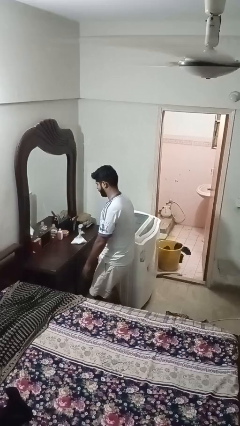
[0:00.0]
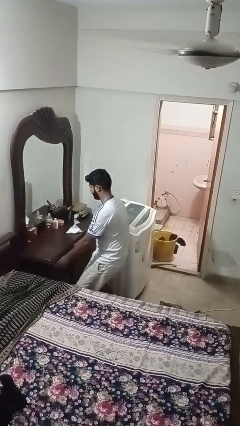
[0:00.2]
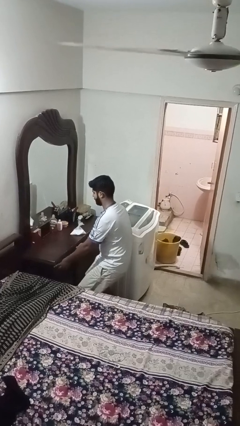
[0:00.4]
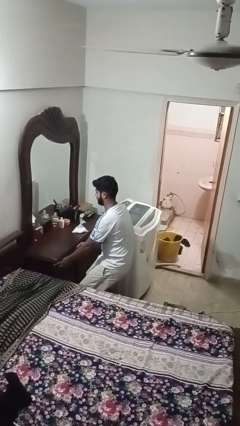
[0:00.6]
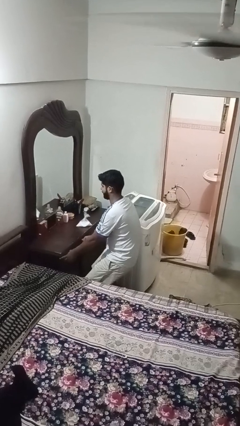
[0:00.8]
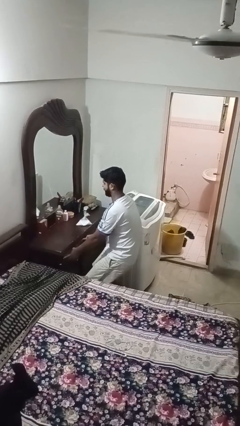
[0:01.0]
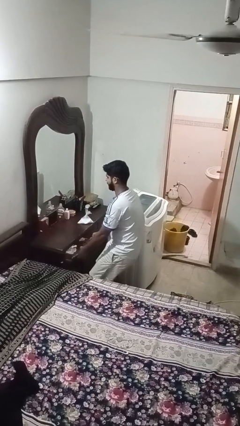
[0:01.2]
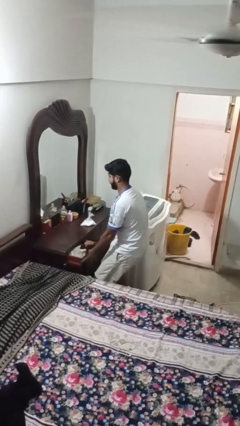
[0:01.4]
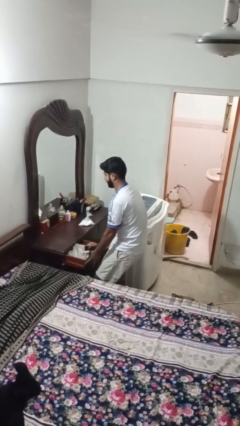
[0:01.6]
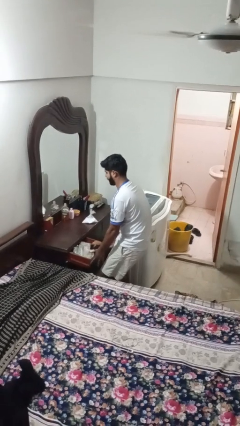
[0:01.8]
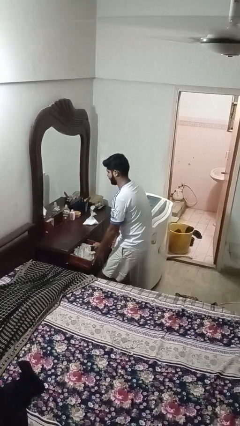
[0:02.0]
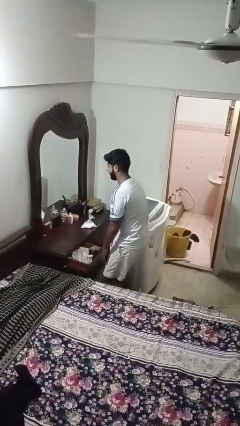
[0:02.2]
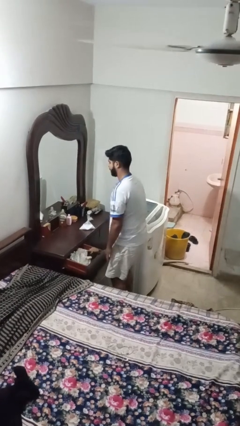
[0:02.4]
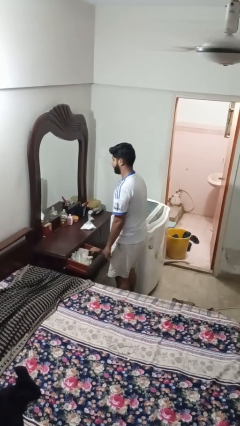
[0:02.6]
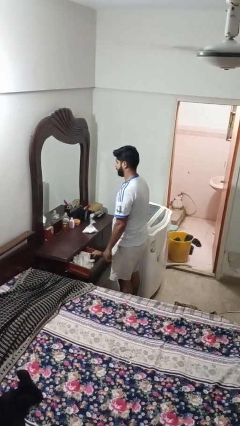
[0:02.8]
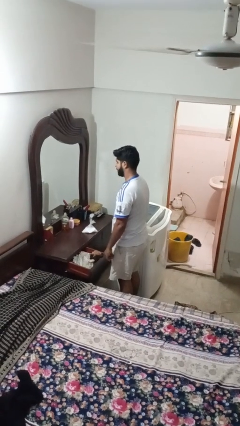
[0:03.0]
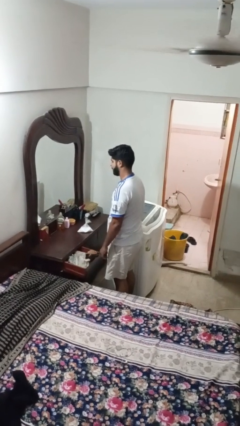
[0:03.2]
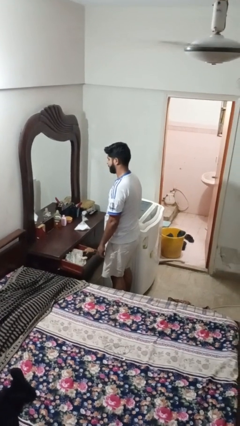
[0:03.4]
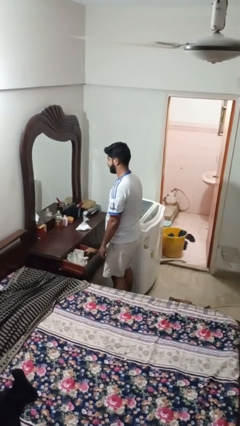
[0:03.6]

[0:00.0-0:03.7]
person opens dresser drawer

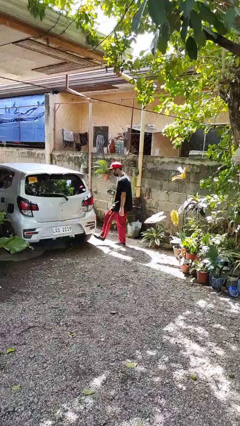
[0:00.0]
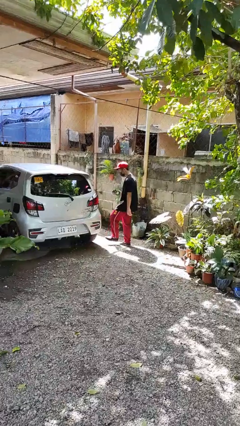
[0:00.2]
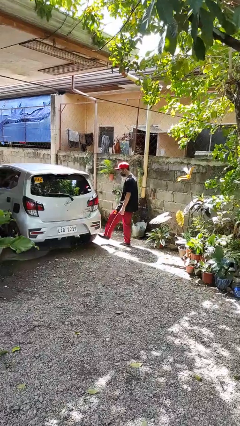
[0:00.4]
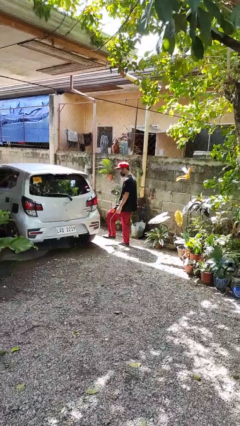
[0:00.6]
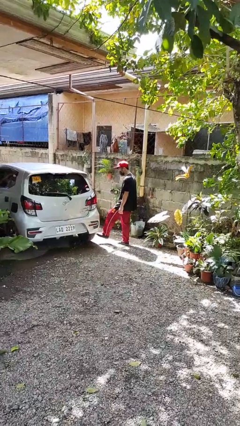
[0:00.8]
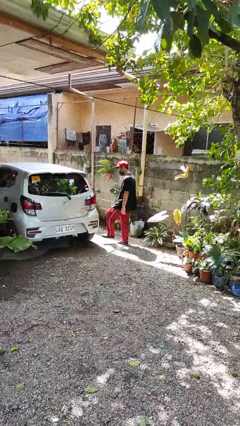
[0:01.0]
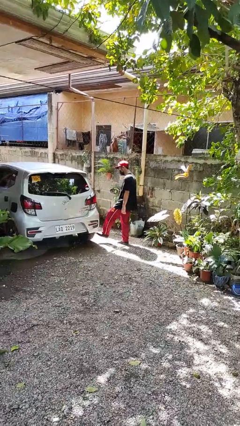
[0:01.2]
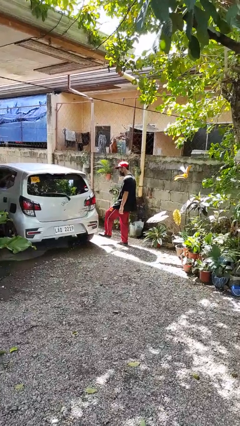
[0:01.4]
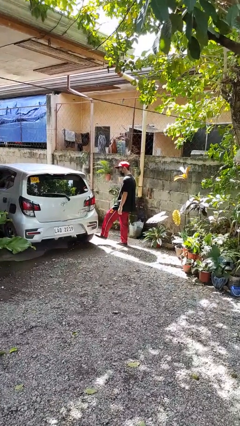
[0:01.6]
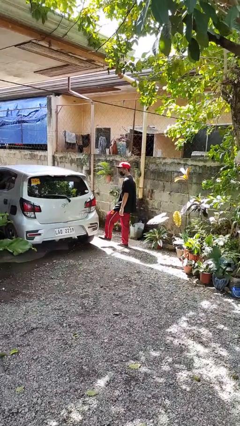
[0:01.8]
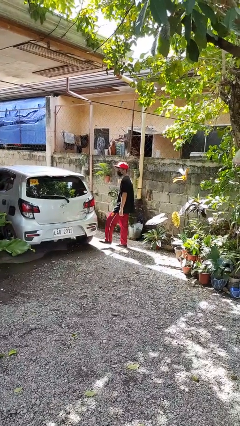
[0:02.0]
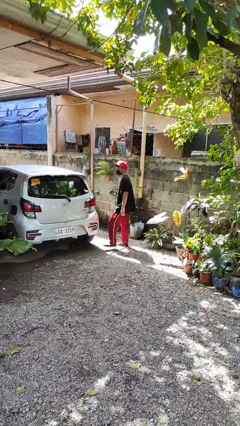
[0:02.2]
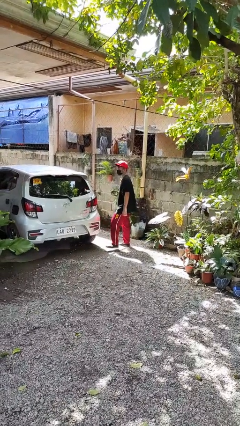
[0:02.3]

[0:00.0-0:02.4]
person kicks car tires

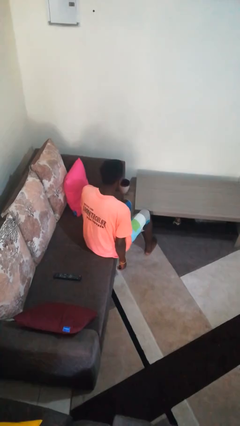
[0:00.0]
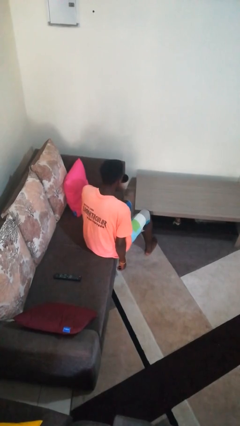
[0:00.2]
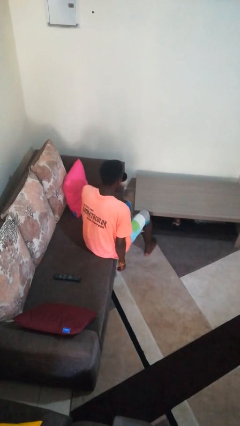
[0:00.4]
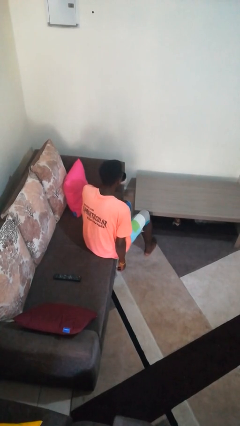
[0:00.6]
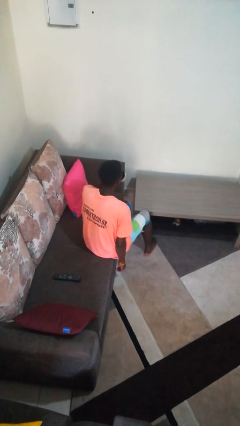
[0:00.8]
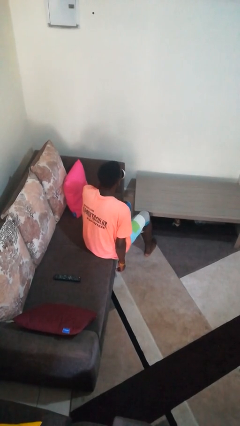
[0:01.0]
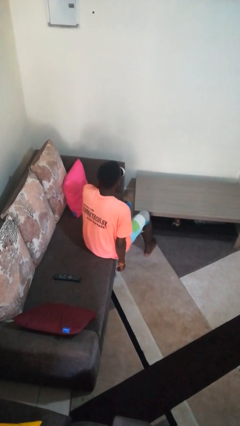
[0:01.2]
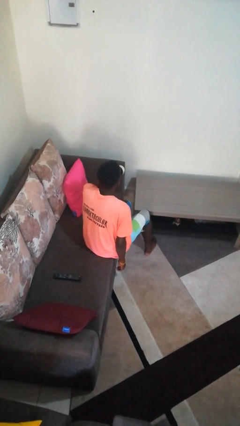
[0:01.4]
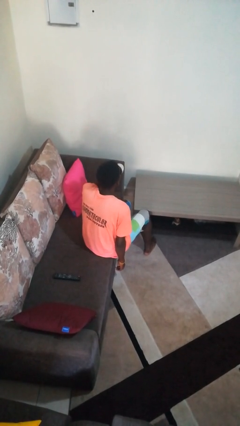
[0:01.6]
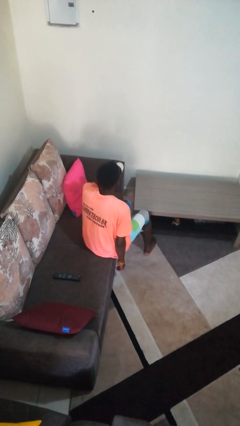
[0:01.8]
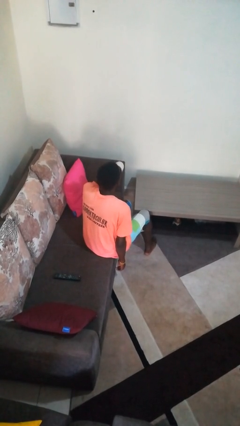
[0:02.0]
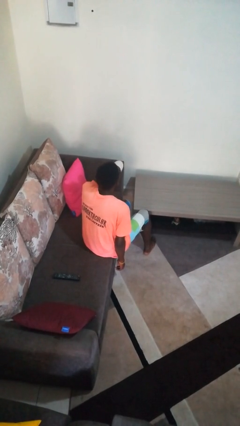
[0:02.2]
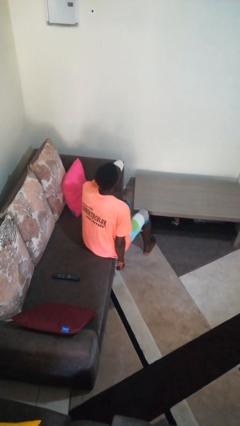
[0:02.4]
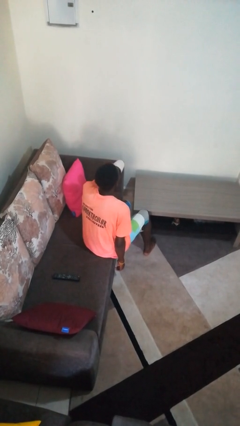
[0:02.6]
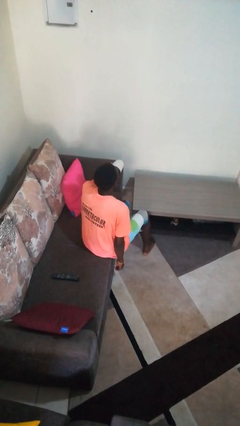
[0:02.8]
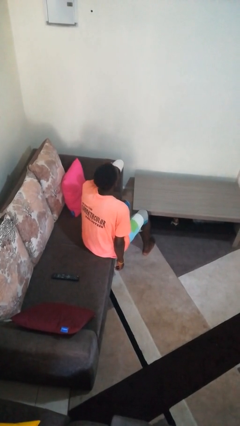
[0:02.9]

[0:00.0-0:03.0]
person drinks from mug

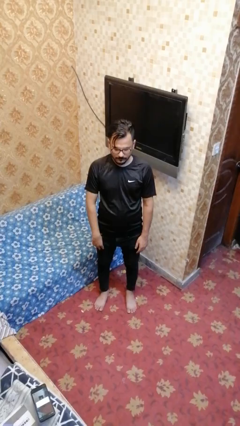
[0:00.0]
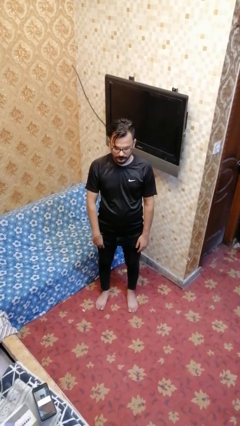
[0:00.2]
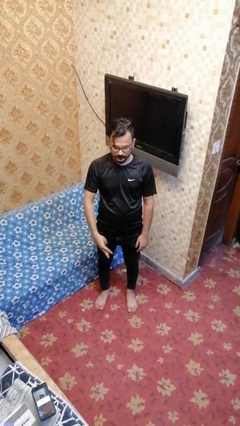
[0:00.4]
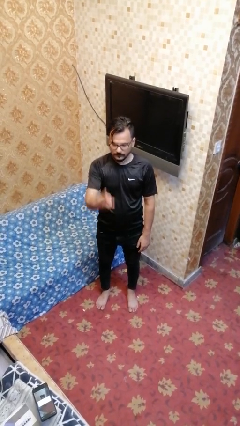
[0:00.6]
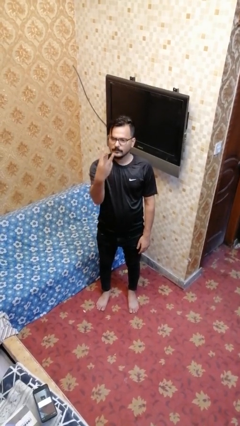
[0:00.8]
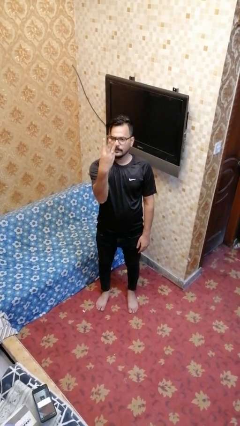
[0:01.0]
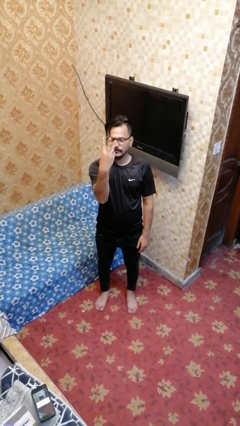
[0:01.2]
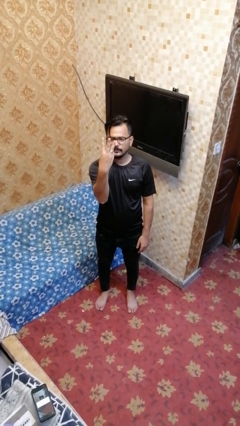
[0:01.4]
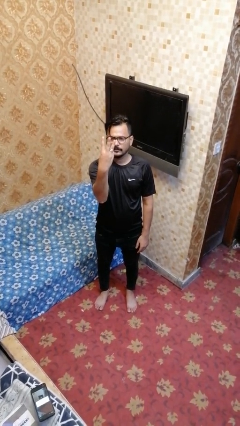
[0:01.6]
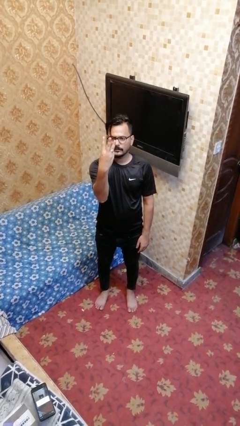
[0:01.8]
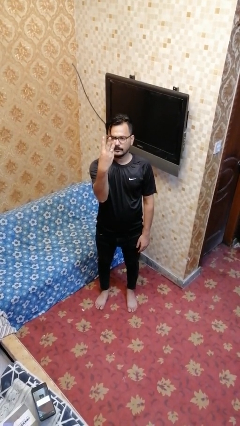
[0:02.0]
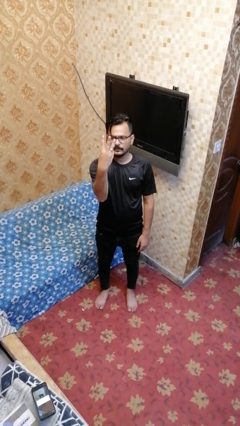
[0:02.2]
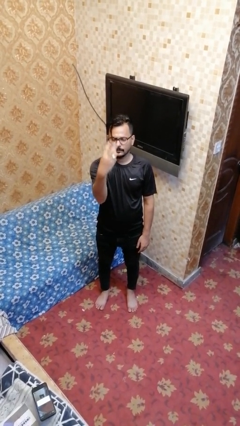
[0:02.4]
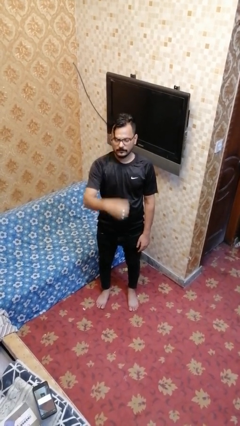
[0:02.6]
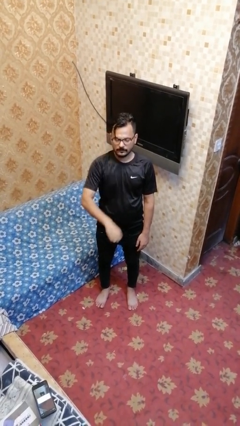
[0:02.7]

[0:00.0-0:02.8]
person gestures number three

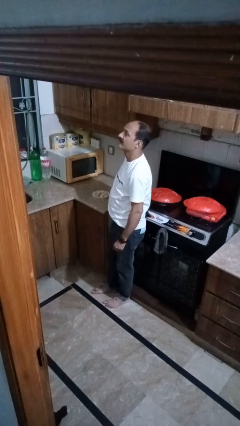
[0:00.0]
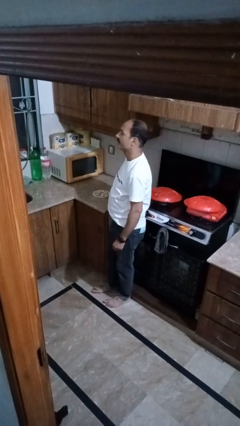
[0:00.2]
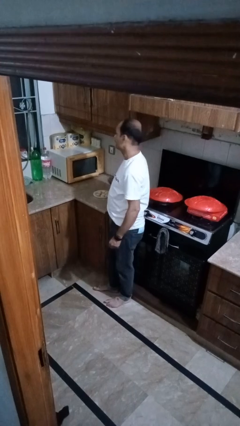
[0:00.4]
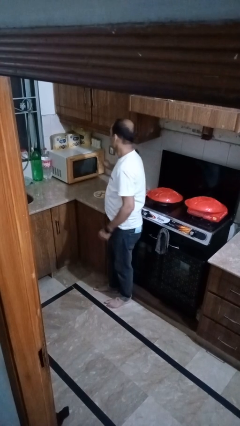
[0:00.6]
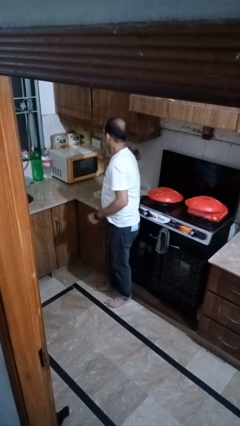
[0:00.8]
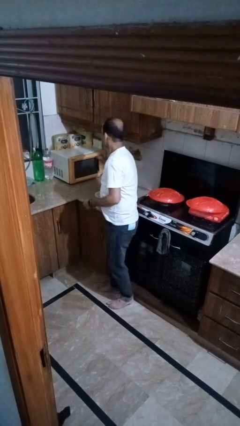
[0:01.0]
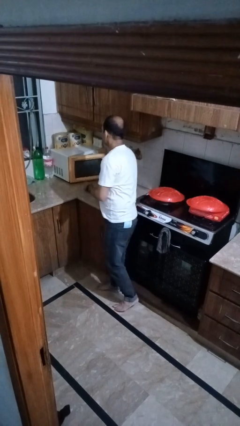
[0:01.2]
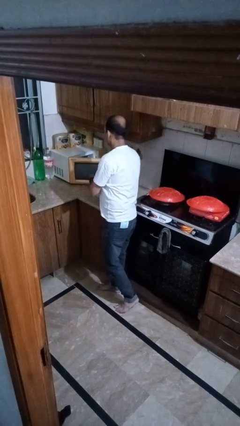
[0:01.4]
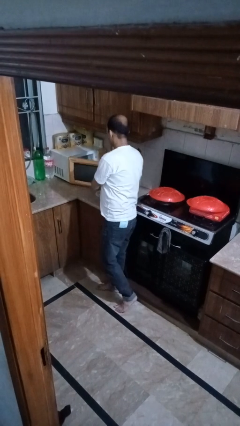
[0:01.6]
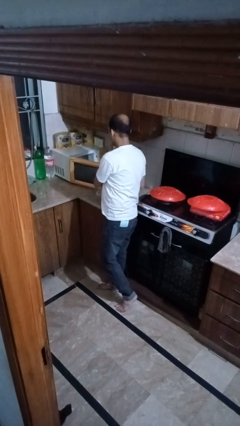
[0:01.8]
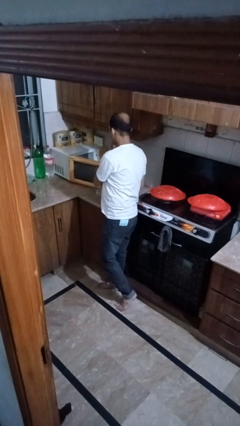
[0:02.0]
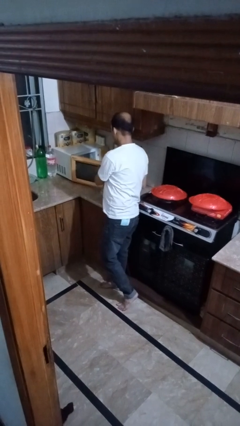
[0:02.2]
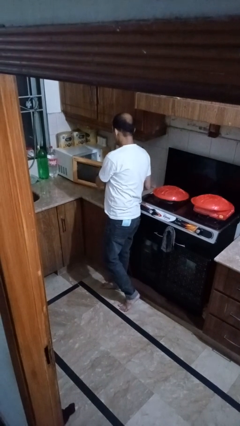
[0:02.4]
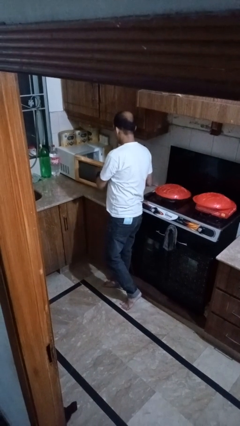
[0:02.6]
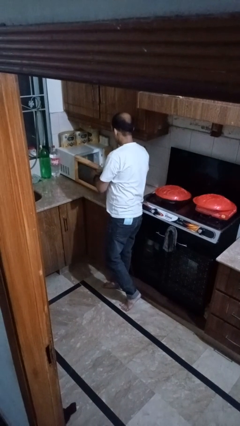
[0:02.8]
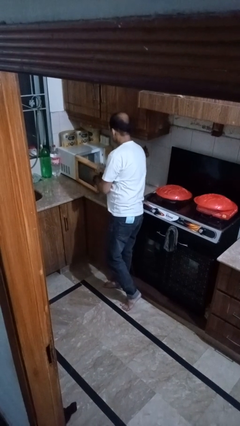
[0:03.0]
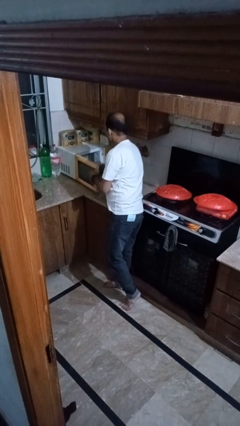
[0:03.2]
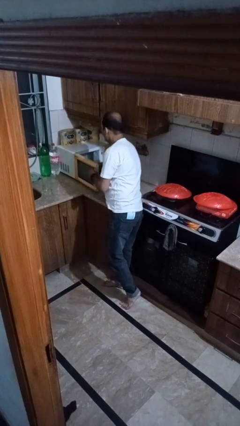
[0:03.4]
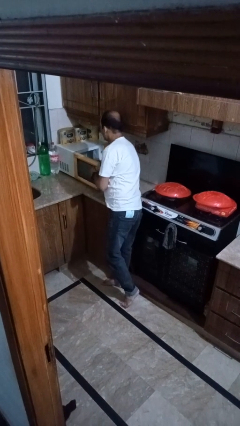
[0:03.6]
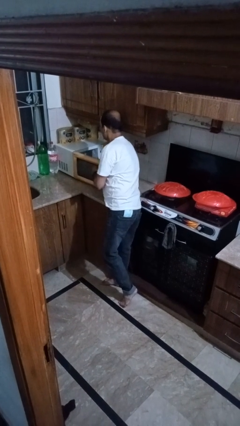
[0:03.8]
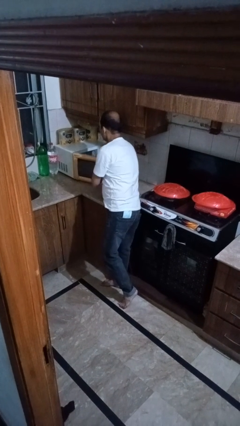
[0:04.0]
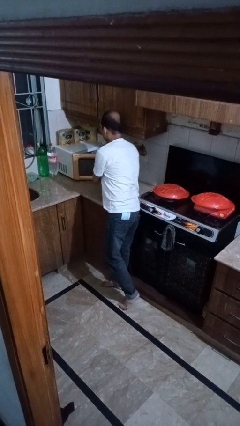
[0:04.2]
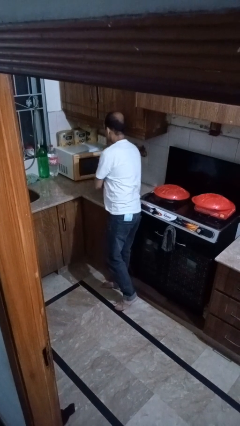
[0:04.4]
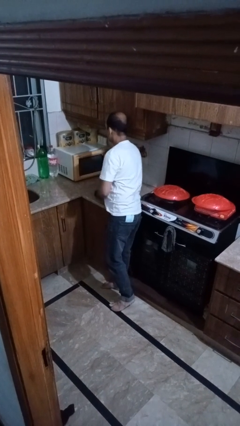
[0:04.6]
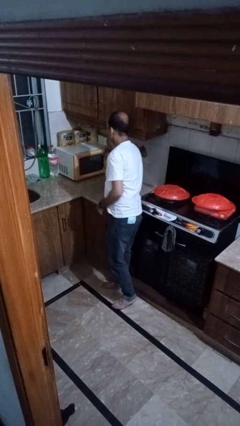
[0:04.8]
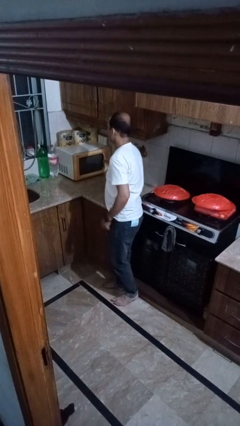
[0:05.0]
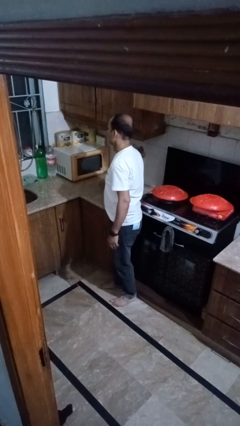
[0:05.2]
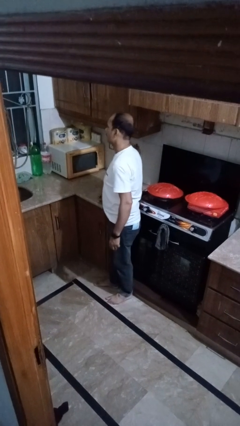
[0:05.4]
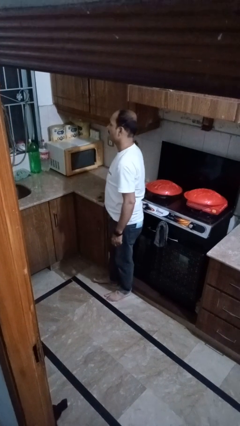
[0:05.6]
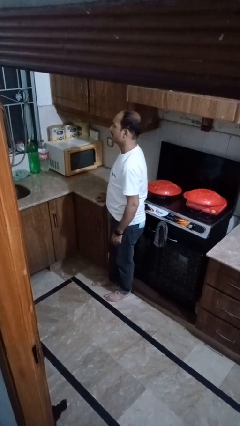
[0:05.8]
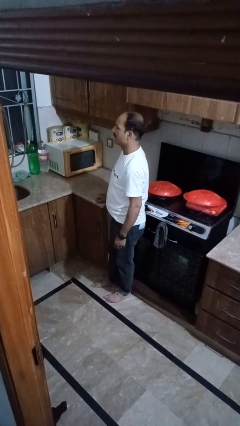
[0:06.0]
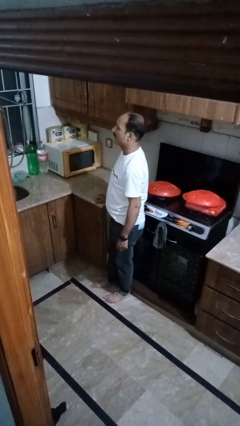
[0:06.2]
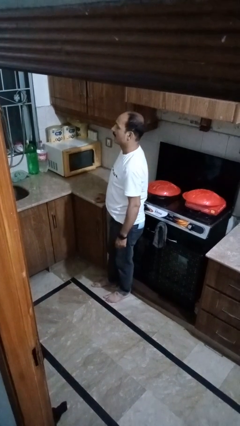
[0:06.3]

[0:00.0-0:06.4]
person puts object into microwave
